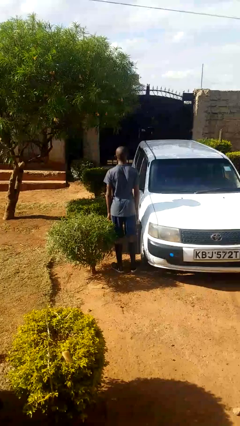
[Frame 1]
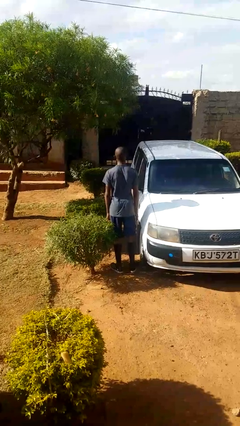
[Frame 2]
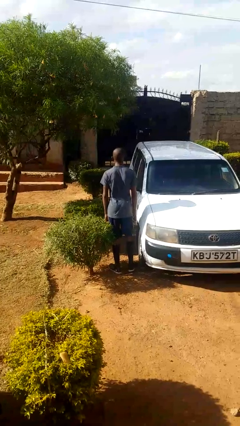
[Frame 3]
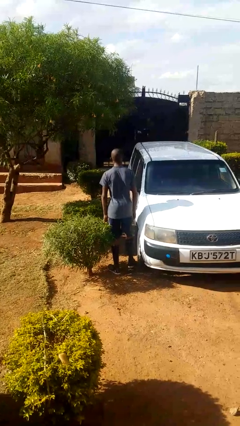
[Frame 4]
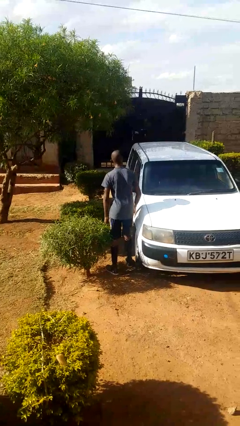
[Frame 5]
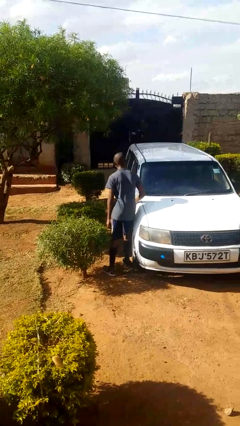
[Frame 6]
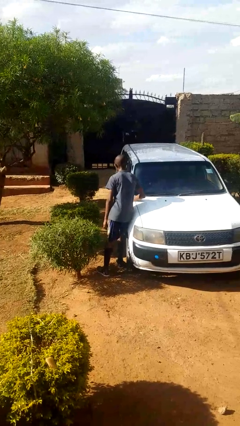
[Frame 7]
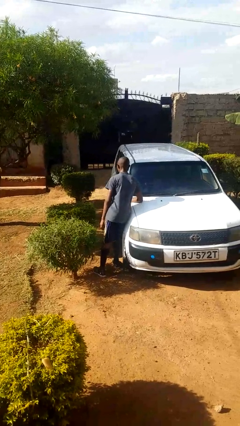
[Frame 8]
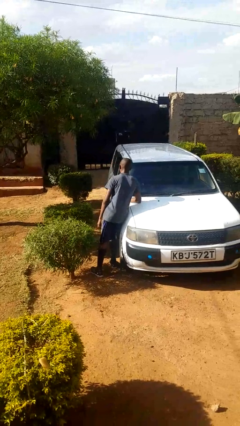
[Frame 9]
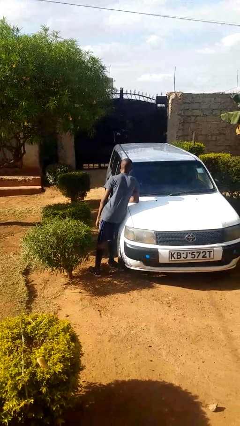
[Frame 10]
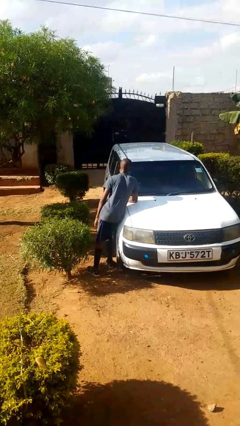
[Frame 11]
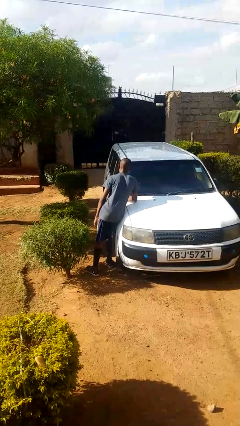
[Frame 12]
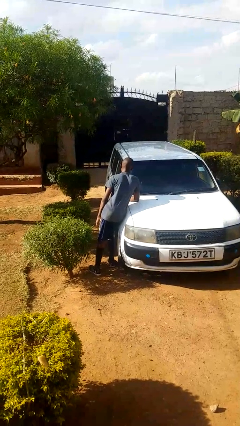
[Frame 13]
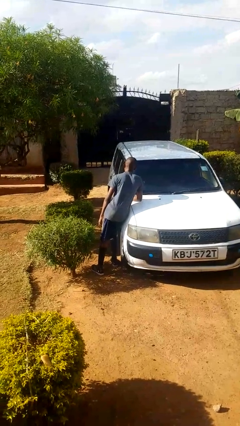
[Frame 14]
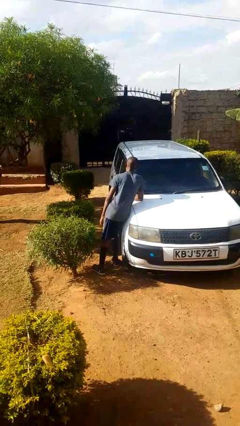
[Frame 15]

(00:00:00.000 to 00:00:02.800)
person leans against car

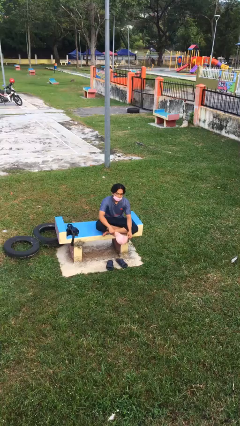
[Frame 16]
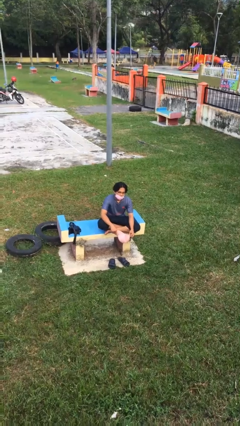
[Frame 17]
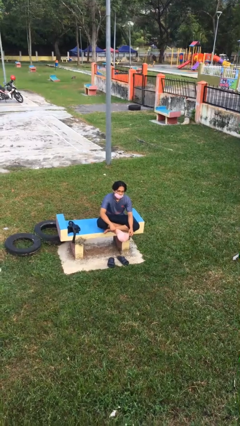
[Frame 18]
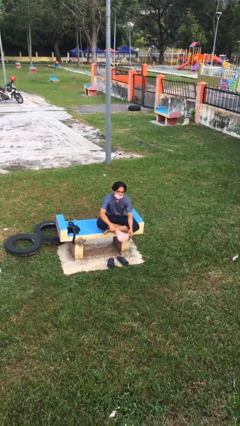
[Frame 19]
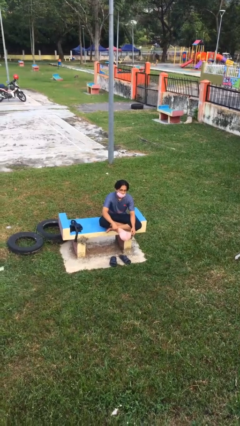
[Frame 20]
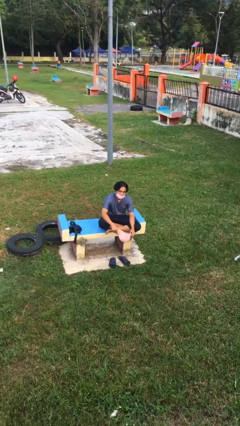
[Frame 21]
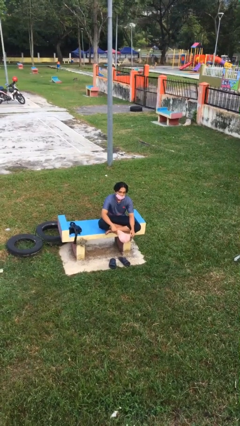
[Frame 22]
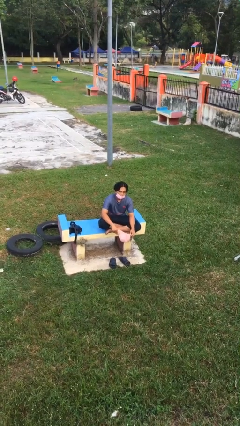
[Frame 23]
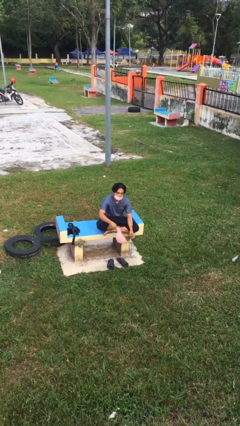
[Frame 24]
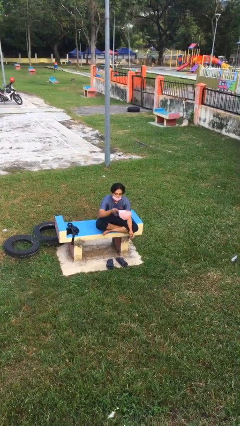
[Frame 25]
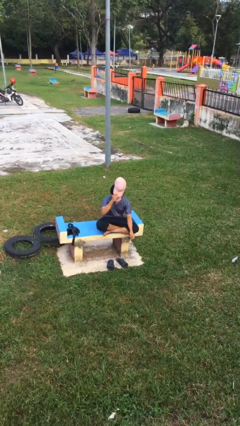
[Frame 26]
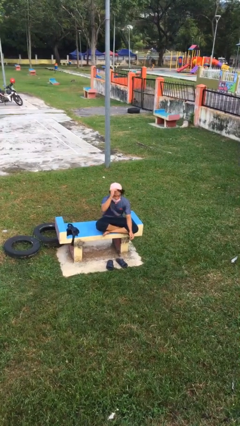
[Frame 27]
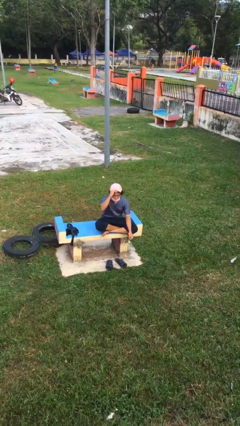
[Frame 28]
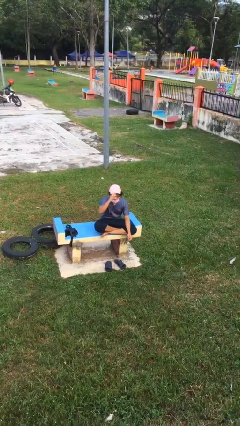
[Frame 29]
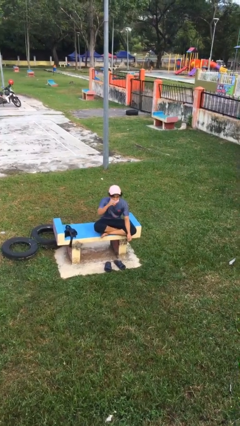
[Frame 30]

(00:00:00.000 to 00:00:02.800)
person puts on hat

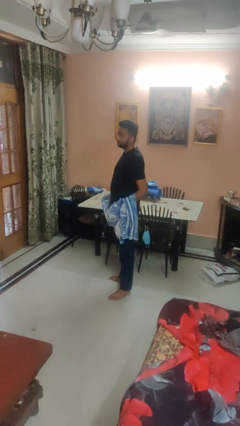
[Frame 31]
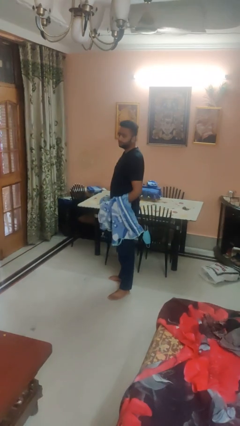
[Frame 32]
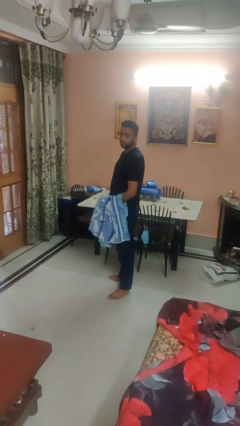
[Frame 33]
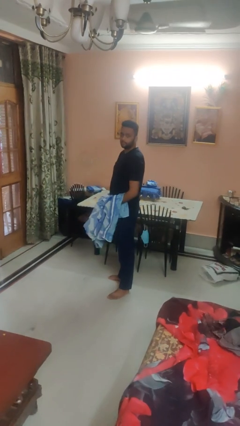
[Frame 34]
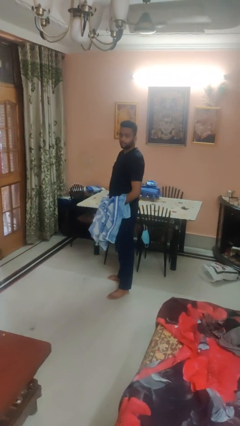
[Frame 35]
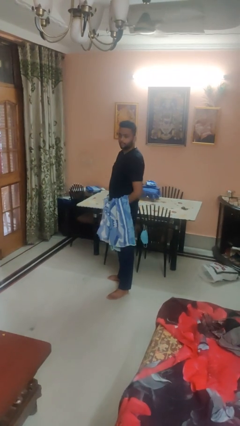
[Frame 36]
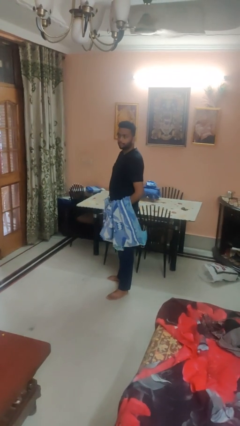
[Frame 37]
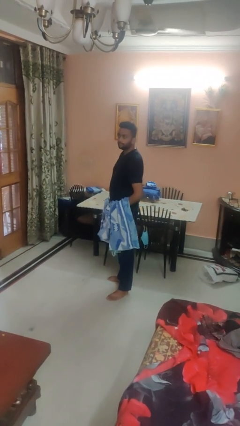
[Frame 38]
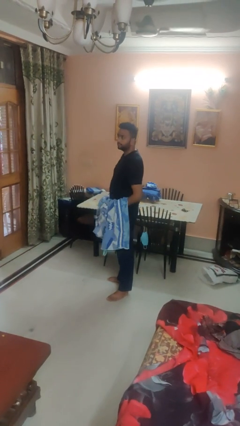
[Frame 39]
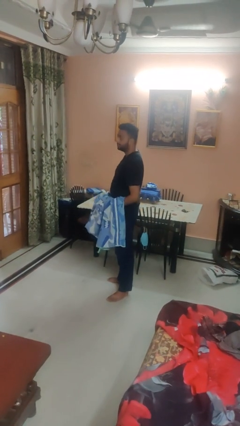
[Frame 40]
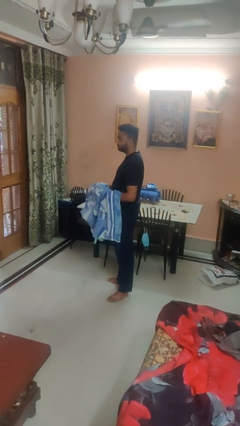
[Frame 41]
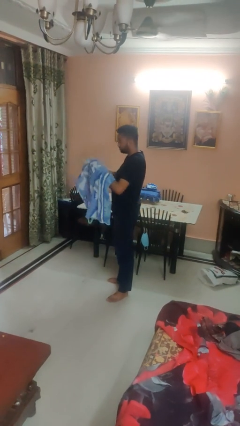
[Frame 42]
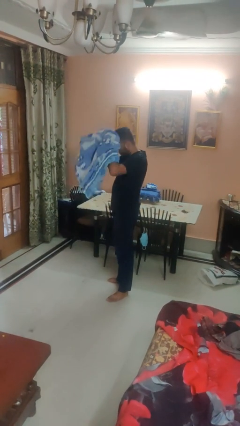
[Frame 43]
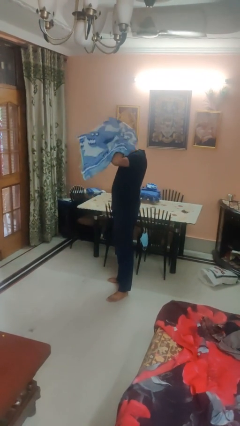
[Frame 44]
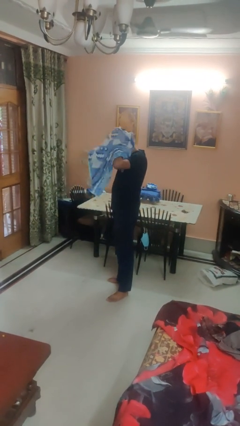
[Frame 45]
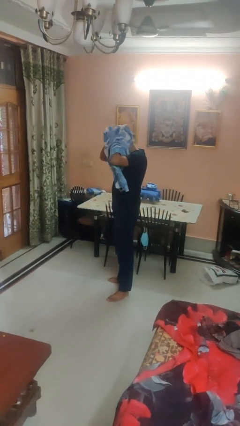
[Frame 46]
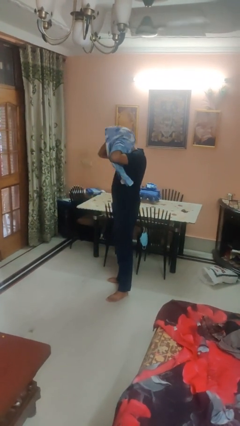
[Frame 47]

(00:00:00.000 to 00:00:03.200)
person dries hair with towel

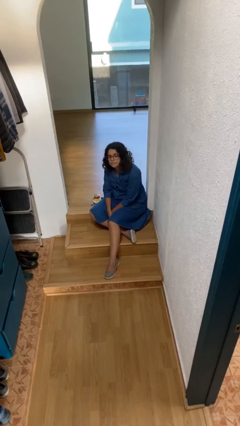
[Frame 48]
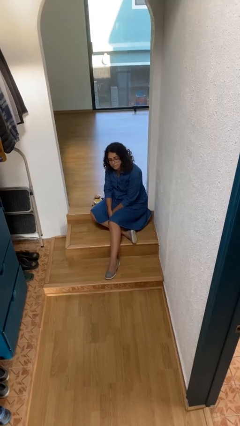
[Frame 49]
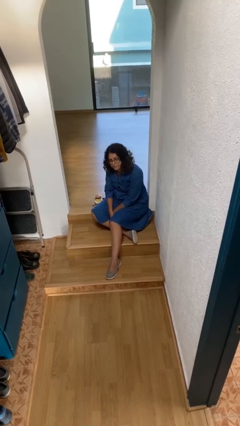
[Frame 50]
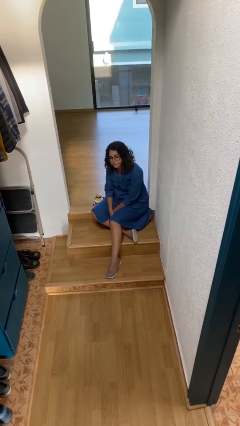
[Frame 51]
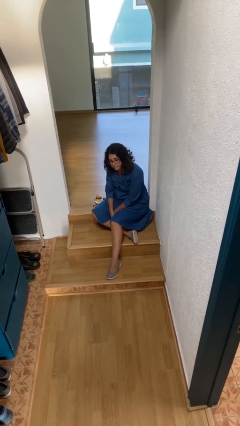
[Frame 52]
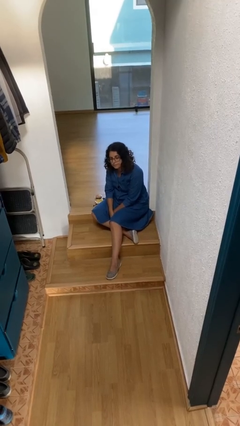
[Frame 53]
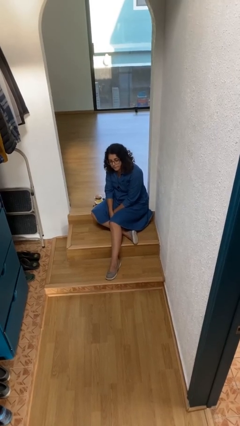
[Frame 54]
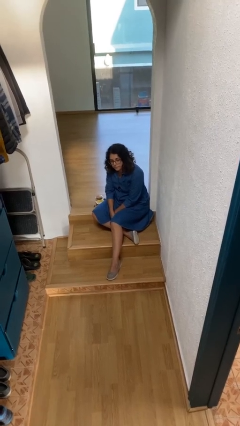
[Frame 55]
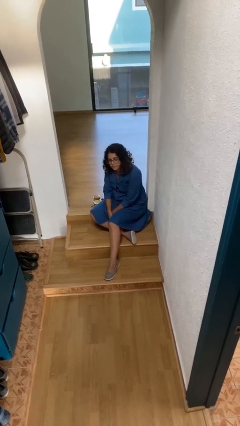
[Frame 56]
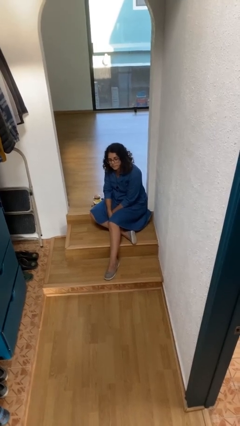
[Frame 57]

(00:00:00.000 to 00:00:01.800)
person nods head

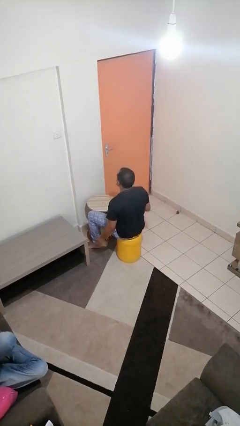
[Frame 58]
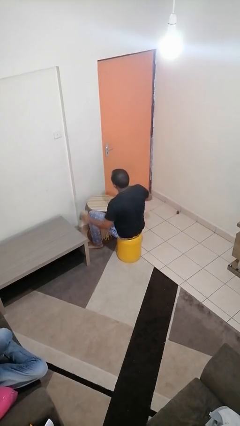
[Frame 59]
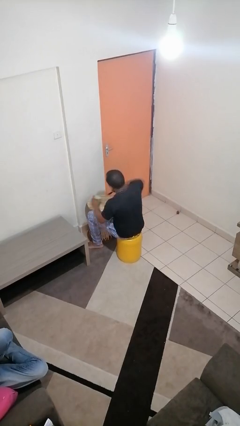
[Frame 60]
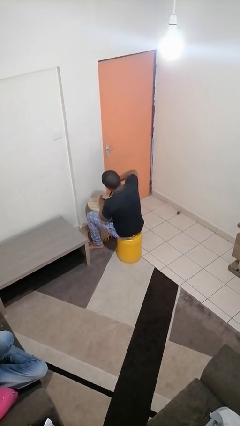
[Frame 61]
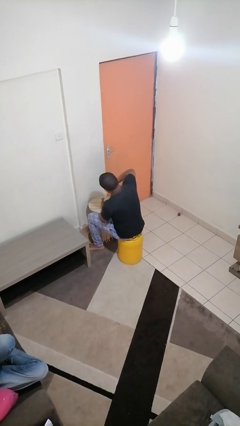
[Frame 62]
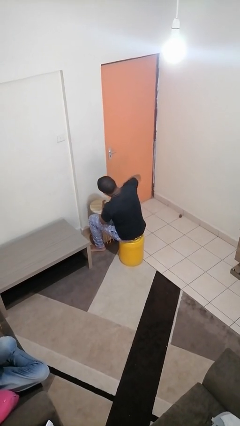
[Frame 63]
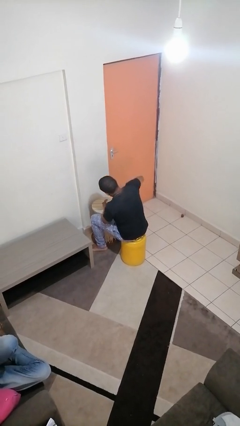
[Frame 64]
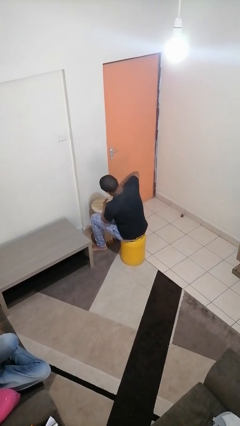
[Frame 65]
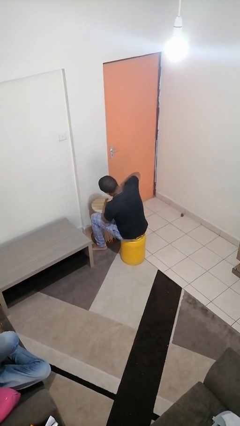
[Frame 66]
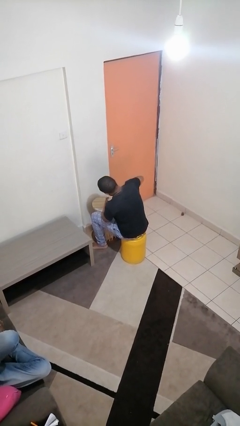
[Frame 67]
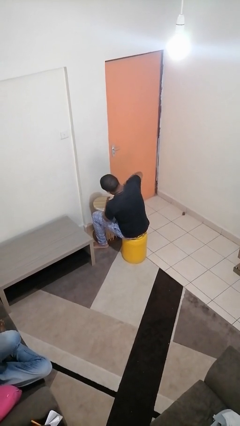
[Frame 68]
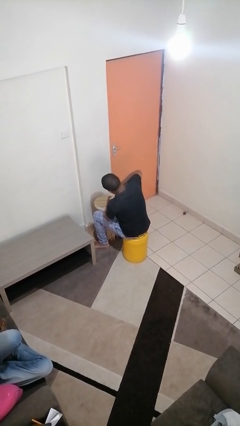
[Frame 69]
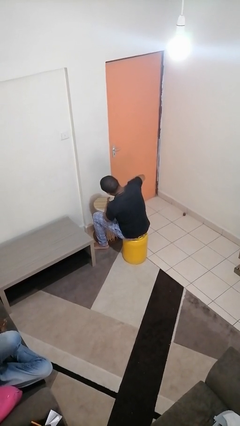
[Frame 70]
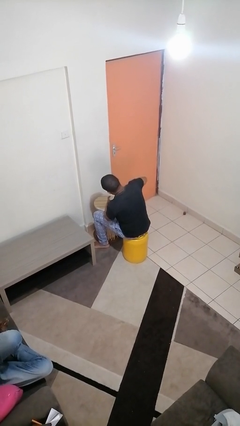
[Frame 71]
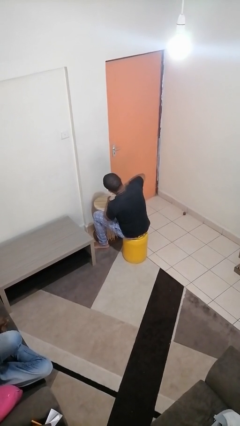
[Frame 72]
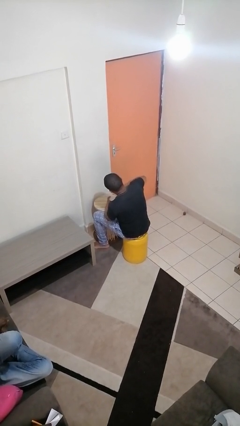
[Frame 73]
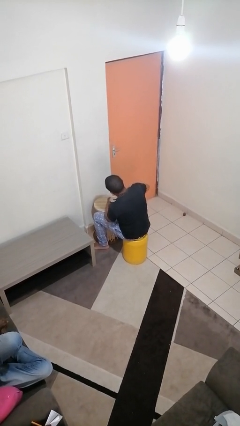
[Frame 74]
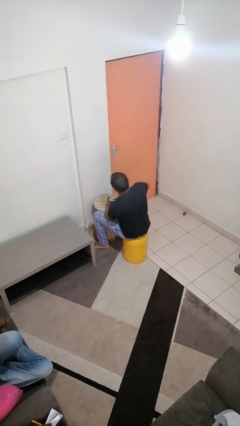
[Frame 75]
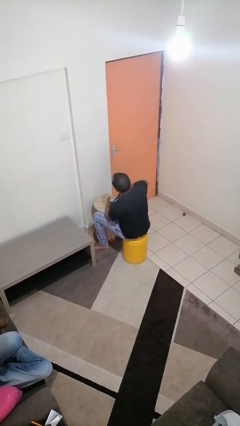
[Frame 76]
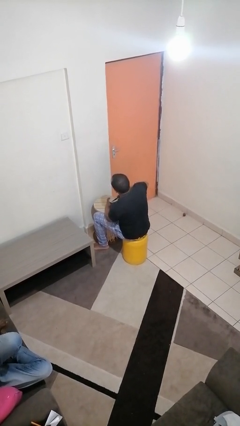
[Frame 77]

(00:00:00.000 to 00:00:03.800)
person opens can with can opener

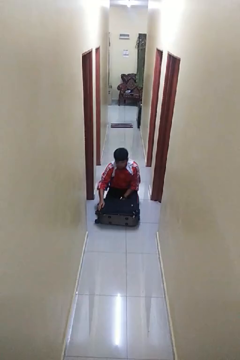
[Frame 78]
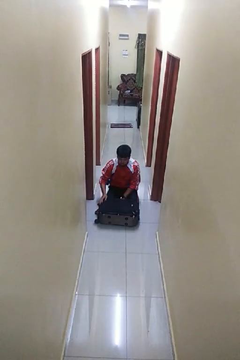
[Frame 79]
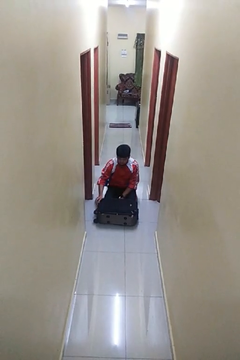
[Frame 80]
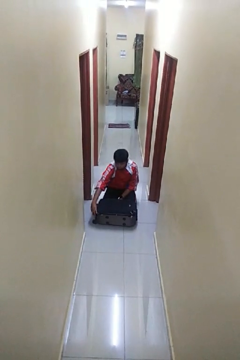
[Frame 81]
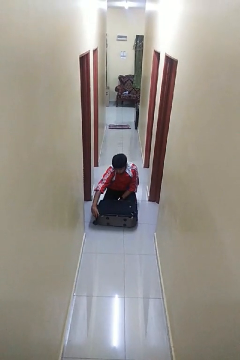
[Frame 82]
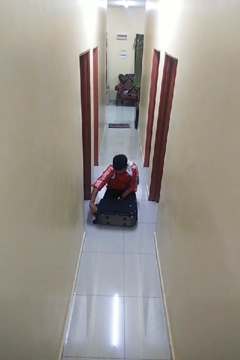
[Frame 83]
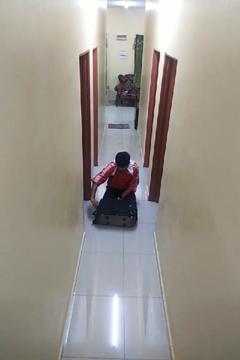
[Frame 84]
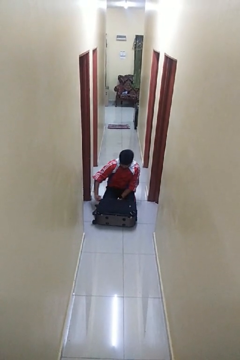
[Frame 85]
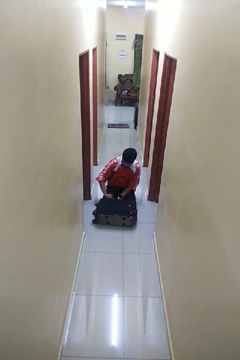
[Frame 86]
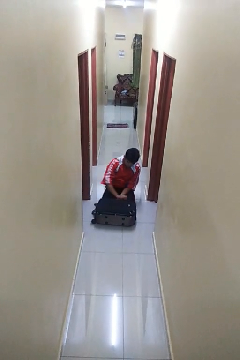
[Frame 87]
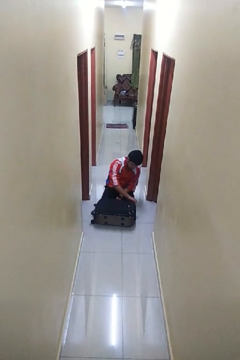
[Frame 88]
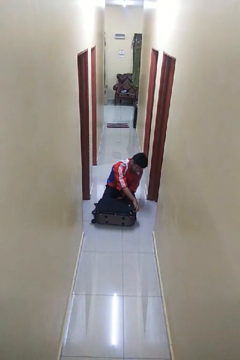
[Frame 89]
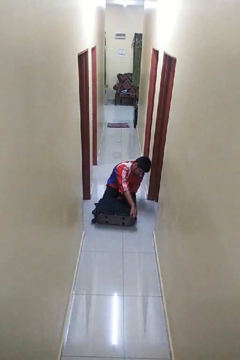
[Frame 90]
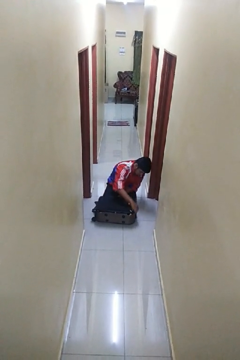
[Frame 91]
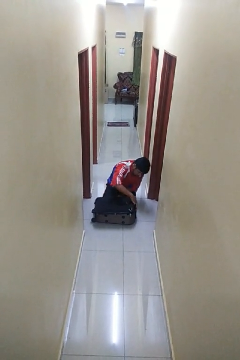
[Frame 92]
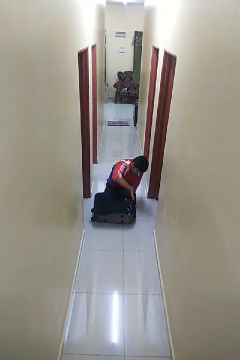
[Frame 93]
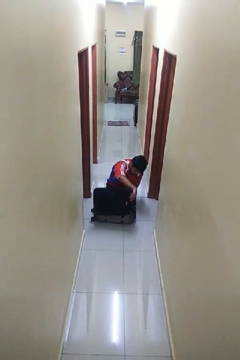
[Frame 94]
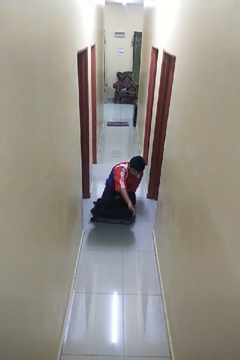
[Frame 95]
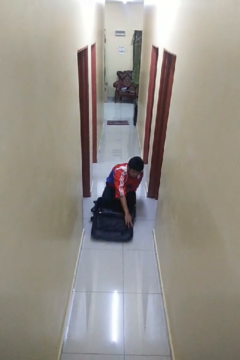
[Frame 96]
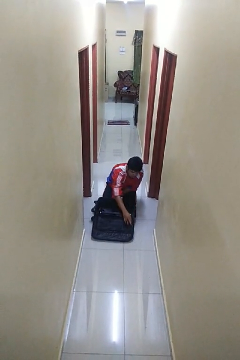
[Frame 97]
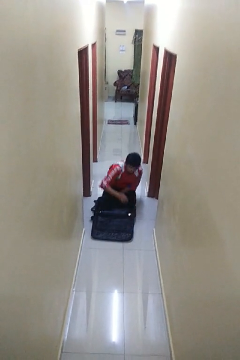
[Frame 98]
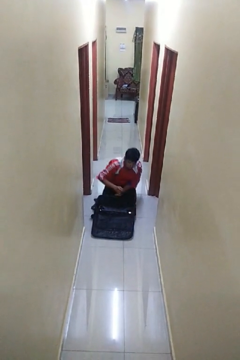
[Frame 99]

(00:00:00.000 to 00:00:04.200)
person opens suitcase
